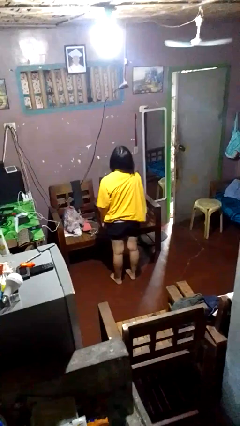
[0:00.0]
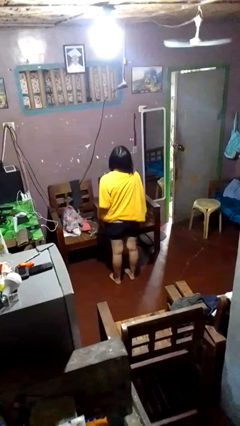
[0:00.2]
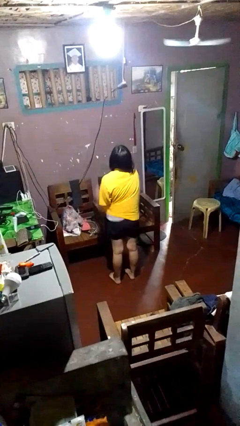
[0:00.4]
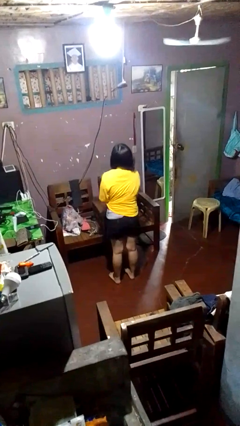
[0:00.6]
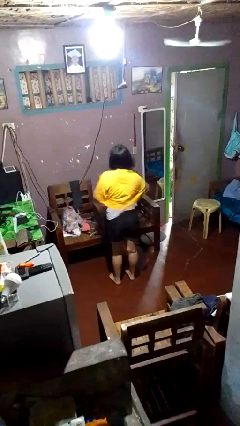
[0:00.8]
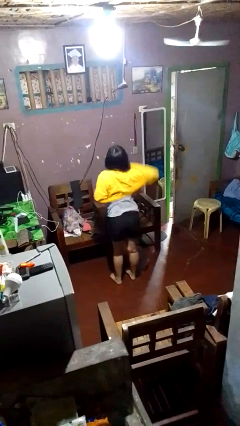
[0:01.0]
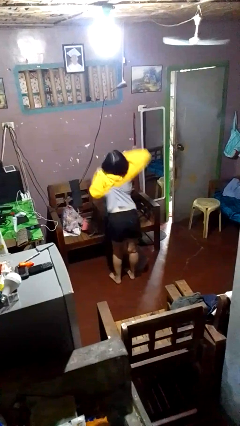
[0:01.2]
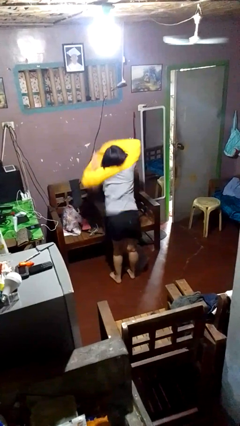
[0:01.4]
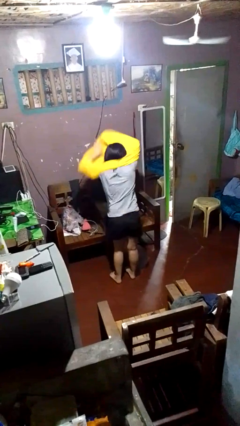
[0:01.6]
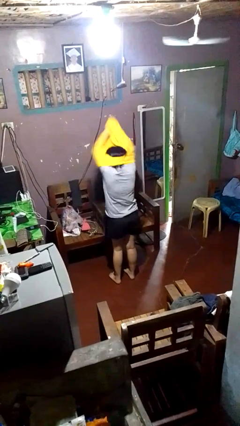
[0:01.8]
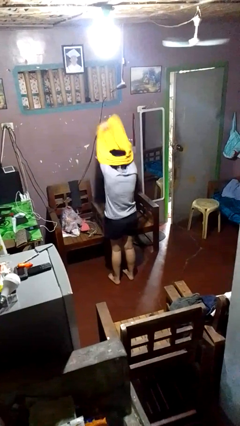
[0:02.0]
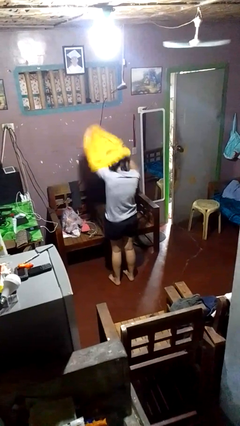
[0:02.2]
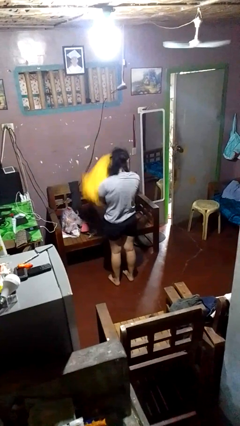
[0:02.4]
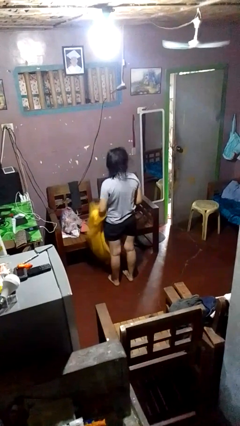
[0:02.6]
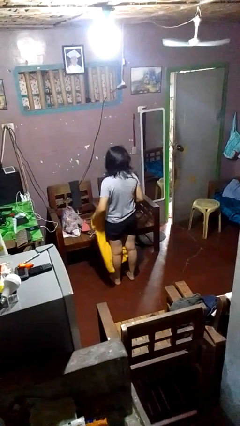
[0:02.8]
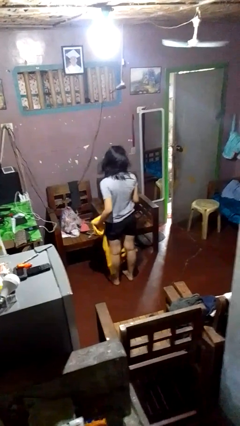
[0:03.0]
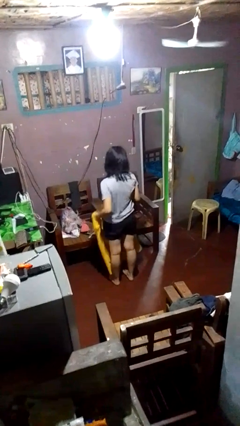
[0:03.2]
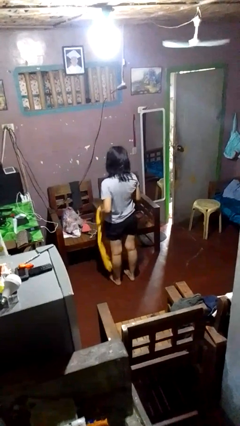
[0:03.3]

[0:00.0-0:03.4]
person takes off shirt

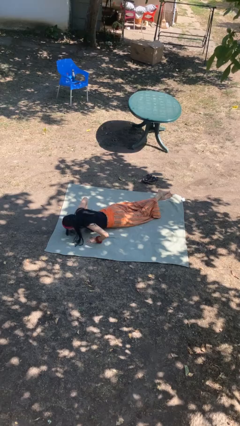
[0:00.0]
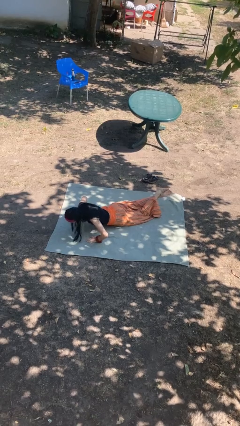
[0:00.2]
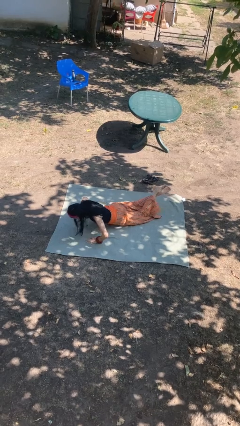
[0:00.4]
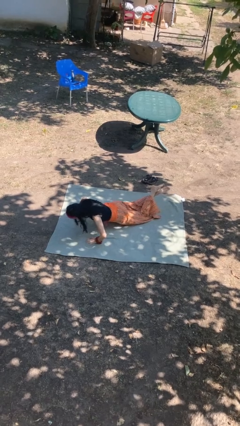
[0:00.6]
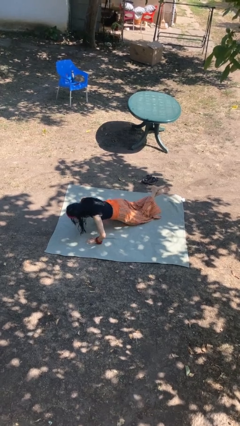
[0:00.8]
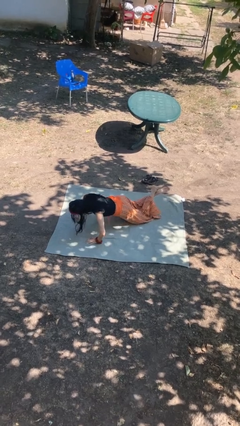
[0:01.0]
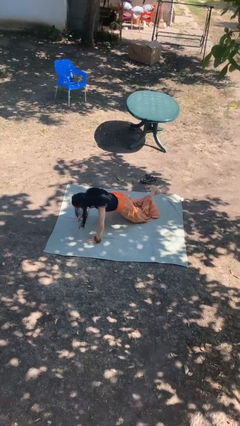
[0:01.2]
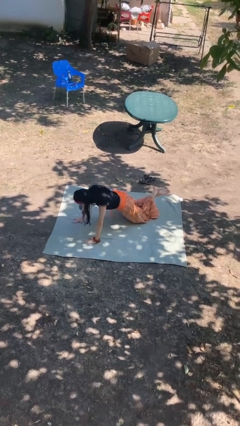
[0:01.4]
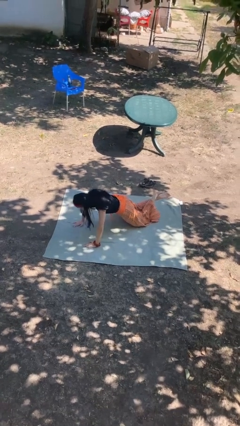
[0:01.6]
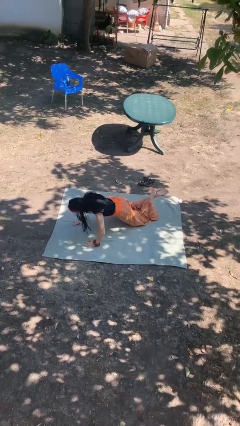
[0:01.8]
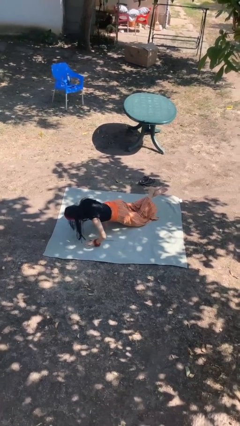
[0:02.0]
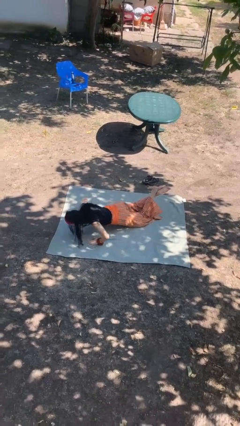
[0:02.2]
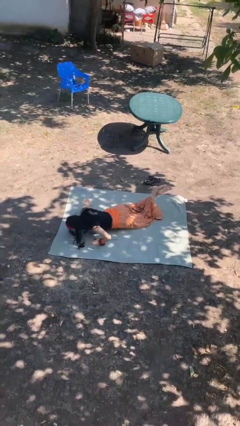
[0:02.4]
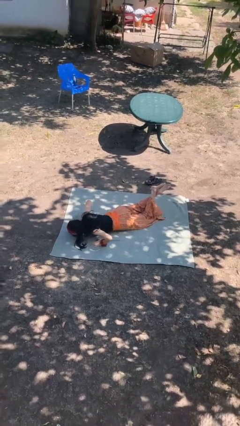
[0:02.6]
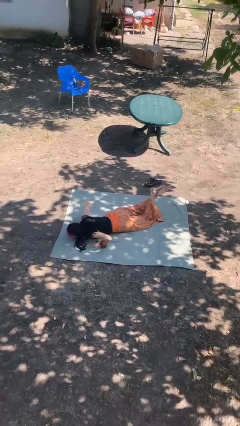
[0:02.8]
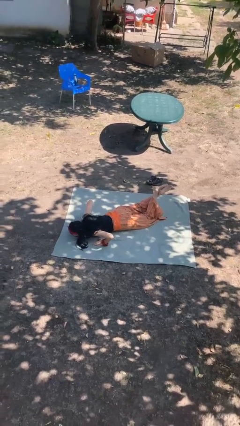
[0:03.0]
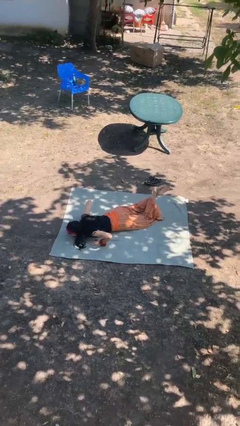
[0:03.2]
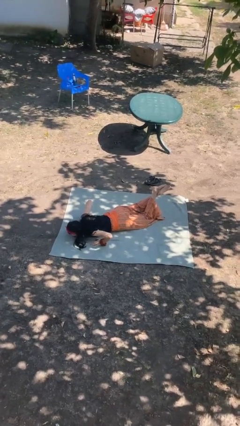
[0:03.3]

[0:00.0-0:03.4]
person exercises with pushup

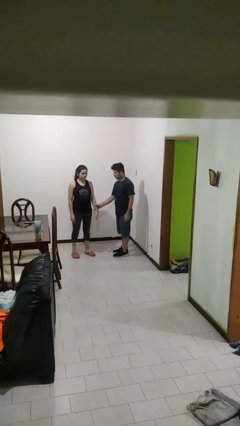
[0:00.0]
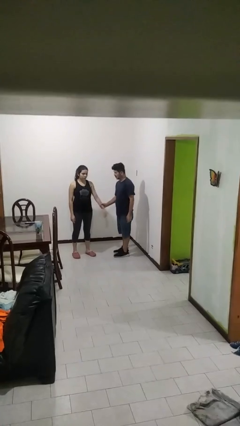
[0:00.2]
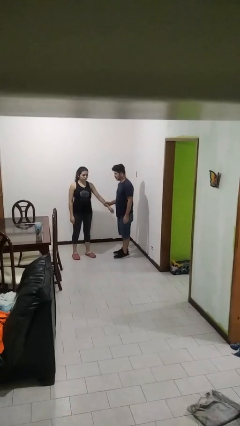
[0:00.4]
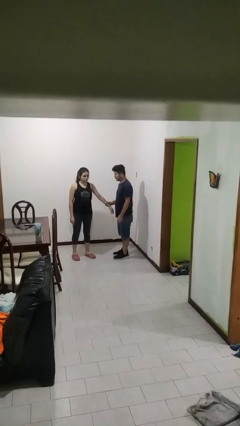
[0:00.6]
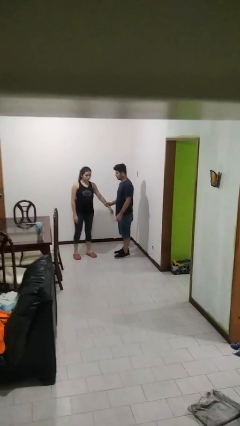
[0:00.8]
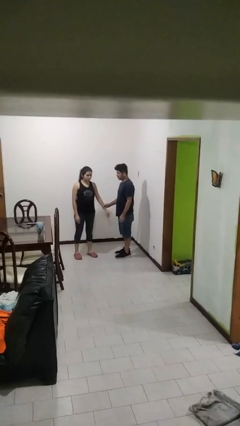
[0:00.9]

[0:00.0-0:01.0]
person grabs person by forearm

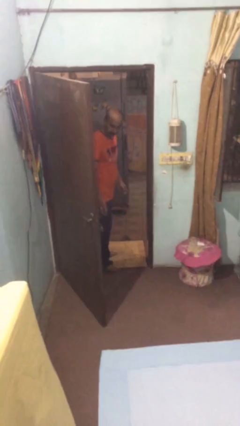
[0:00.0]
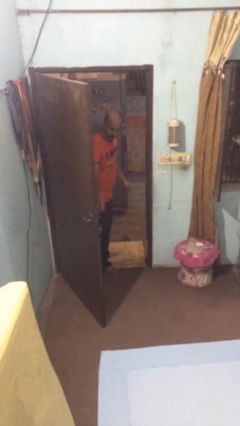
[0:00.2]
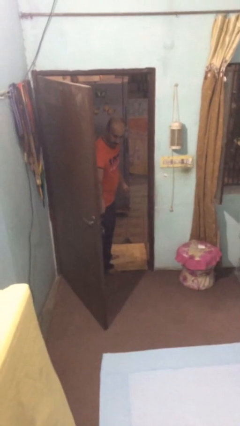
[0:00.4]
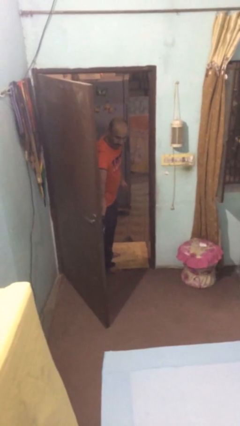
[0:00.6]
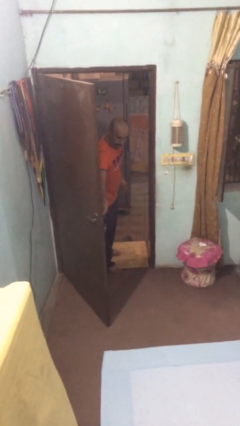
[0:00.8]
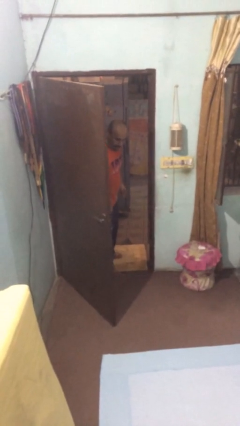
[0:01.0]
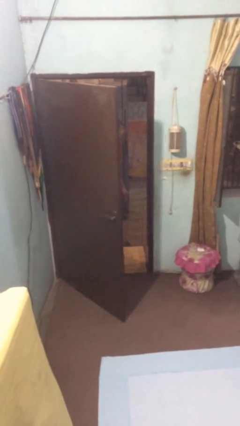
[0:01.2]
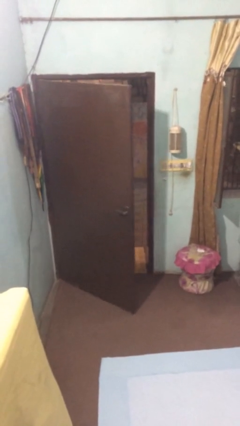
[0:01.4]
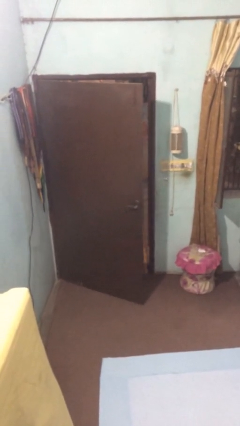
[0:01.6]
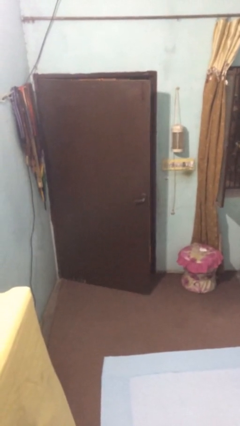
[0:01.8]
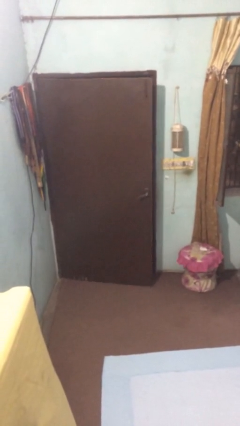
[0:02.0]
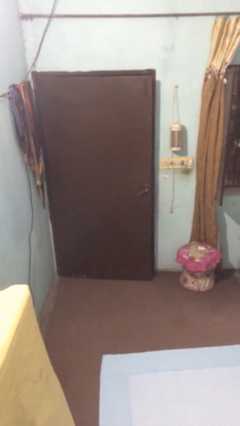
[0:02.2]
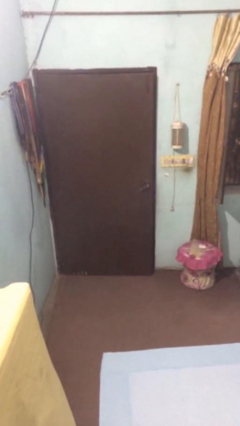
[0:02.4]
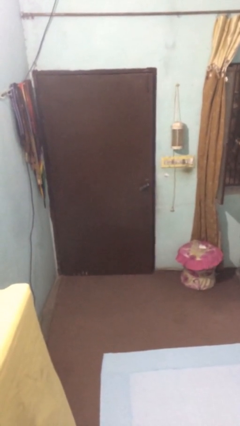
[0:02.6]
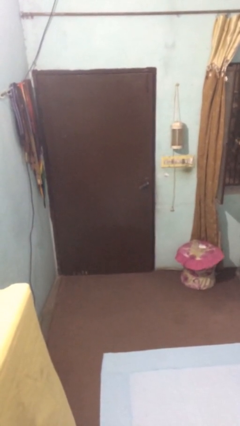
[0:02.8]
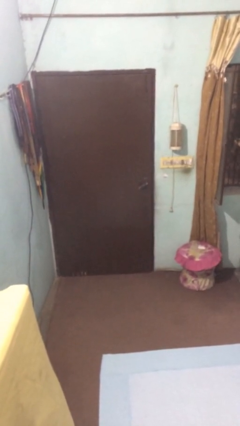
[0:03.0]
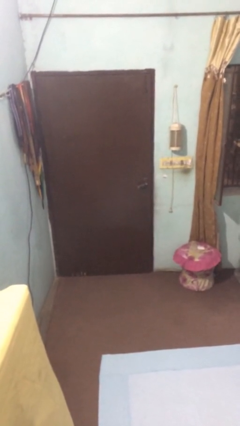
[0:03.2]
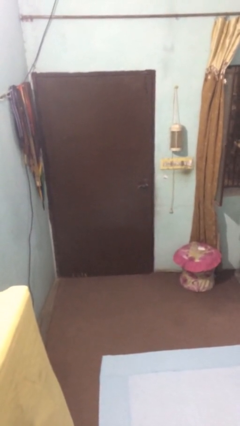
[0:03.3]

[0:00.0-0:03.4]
person closes facility door

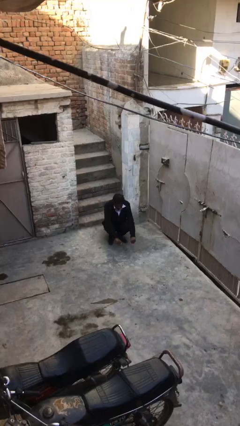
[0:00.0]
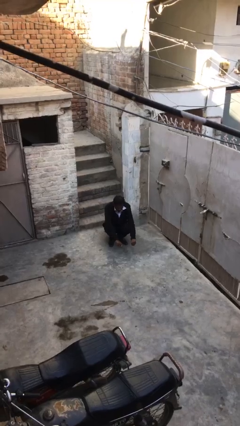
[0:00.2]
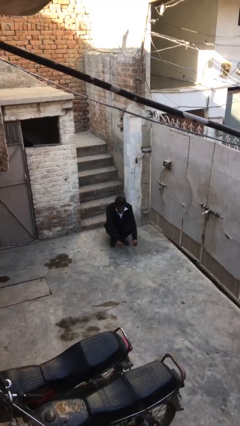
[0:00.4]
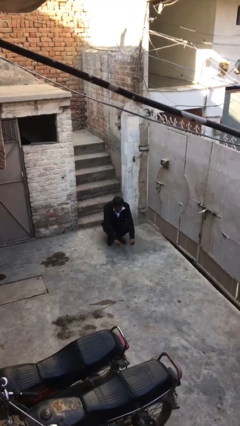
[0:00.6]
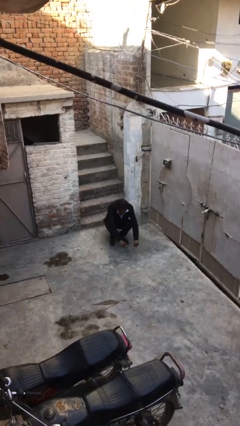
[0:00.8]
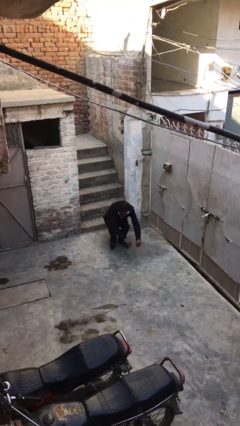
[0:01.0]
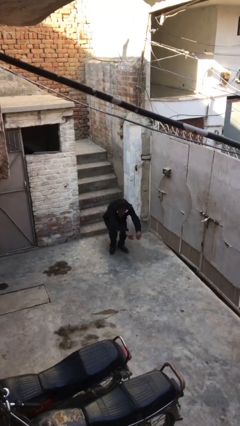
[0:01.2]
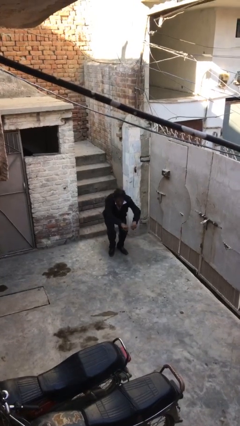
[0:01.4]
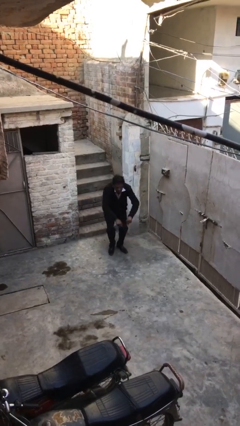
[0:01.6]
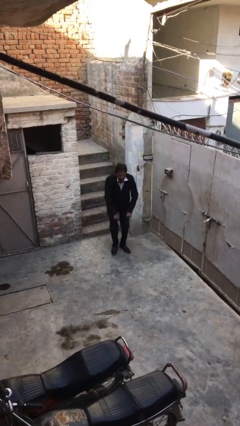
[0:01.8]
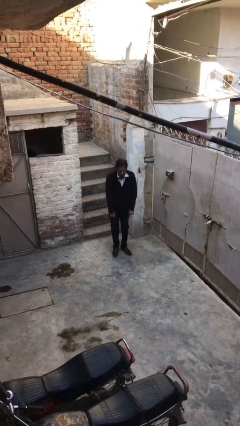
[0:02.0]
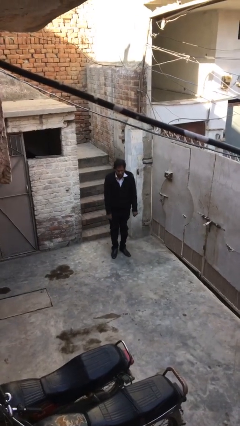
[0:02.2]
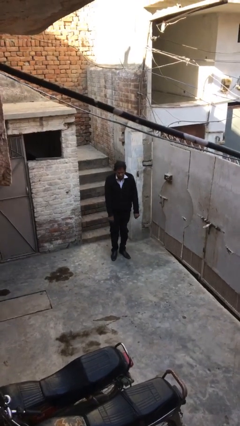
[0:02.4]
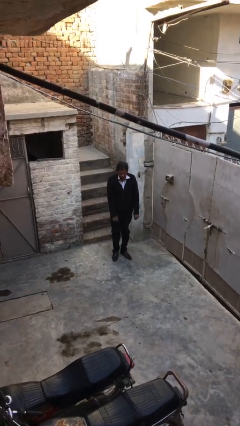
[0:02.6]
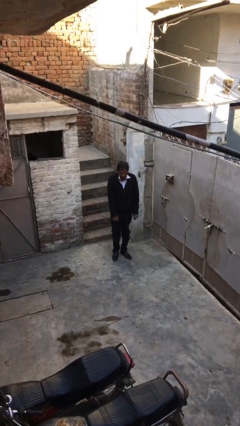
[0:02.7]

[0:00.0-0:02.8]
person stands up

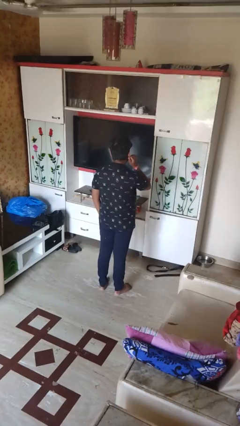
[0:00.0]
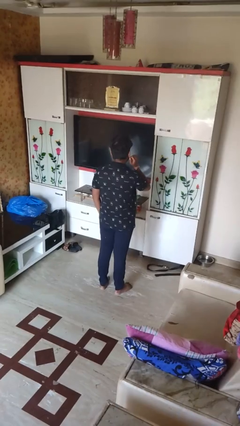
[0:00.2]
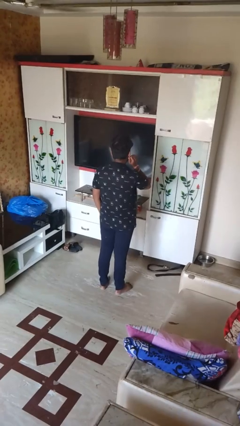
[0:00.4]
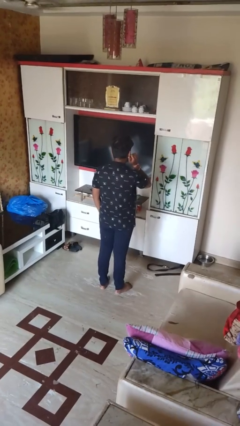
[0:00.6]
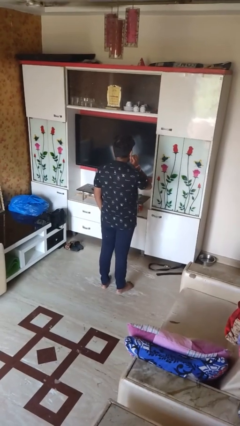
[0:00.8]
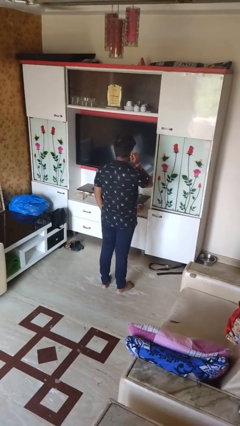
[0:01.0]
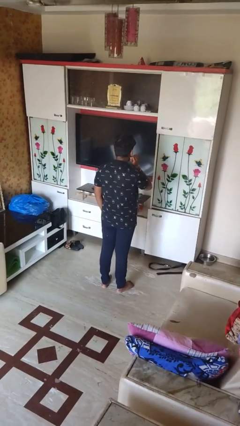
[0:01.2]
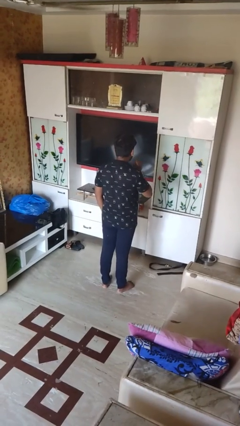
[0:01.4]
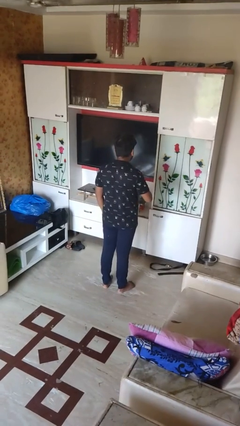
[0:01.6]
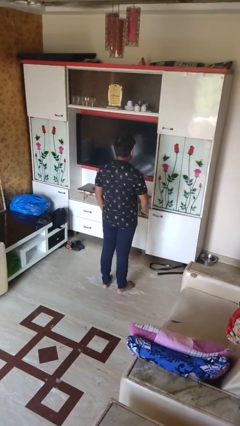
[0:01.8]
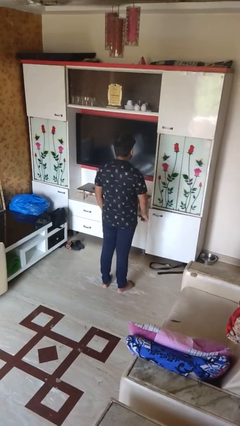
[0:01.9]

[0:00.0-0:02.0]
person touches earlobe

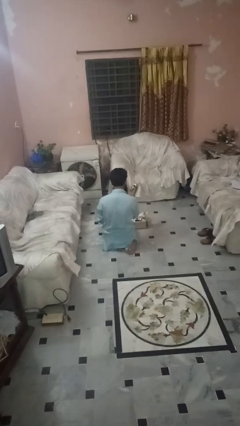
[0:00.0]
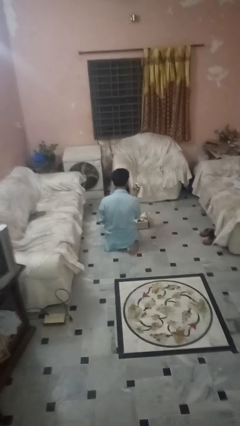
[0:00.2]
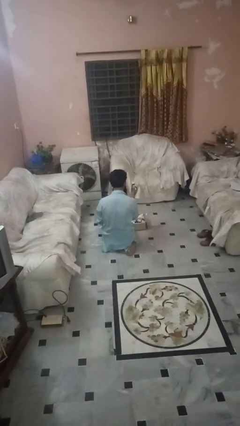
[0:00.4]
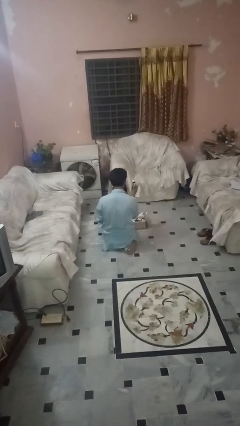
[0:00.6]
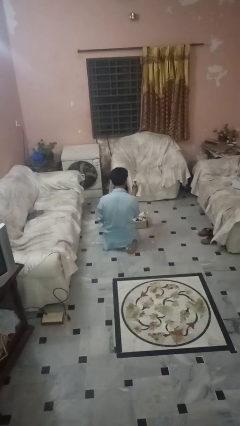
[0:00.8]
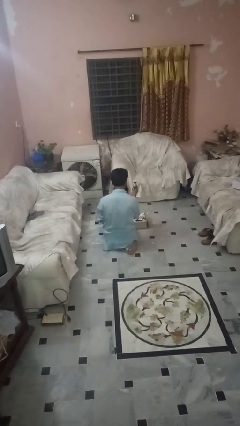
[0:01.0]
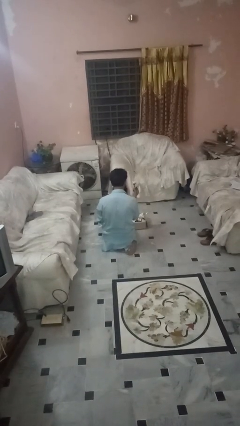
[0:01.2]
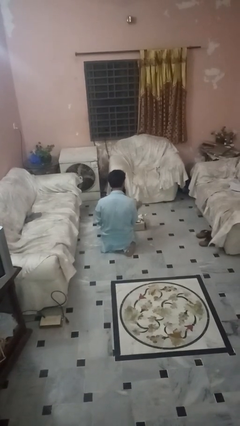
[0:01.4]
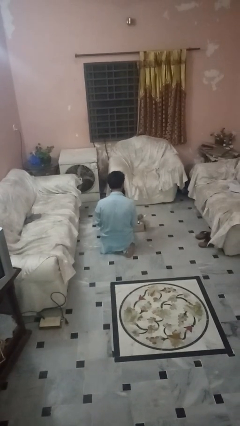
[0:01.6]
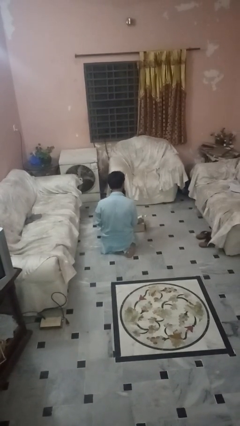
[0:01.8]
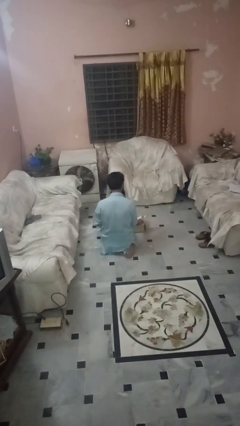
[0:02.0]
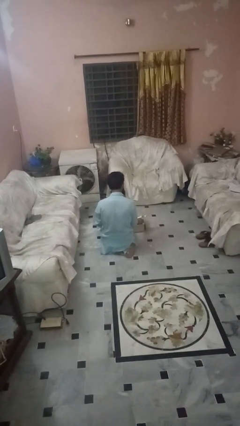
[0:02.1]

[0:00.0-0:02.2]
person puts object into box
